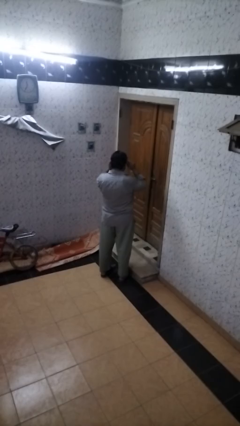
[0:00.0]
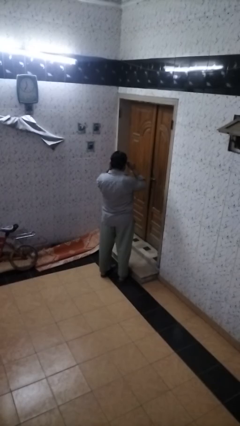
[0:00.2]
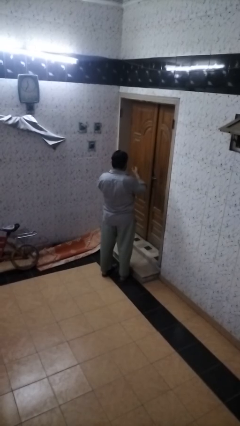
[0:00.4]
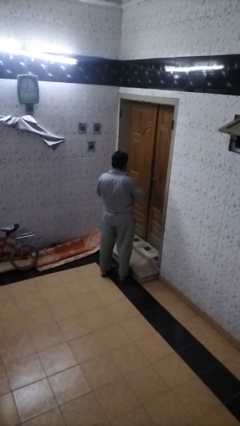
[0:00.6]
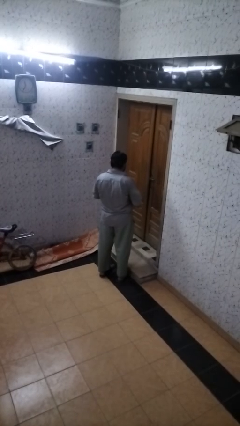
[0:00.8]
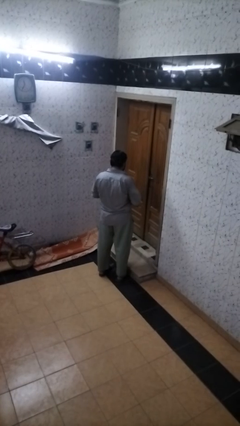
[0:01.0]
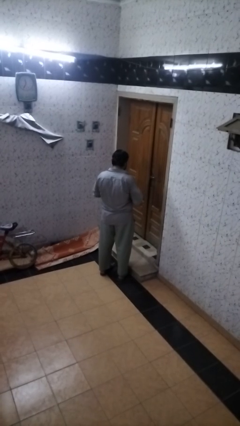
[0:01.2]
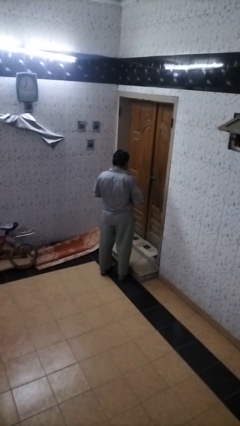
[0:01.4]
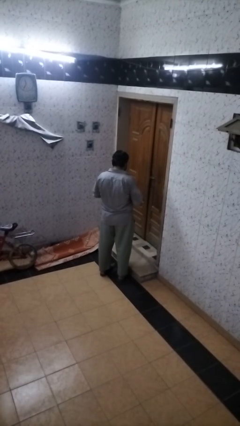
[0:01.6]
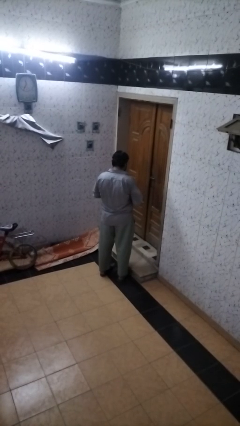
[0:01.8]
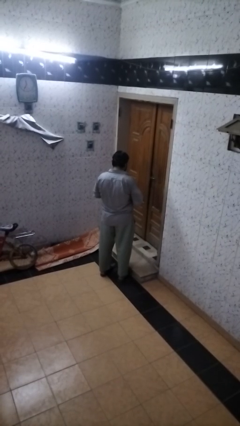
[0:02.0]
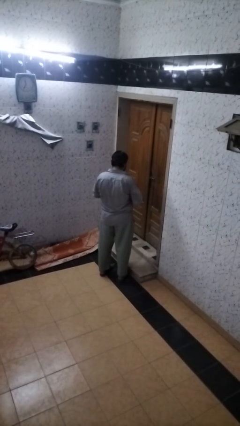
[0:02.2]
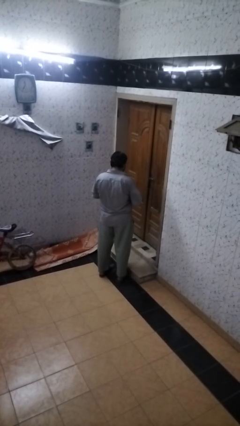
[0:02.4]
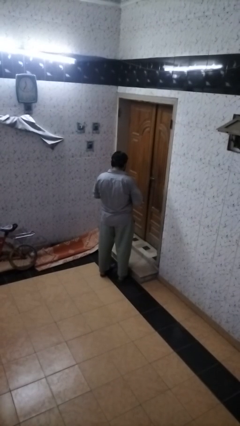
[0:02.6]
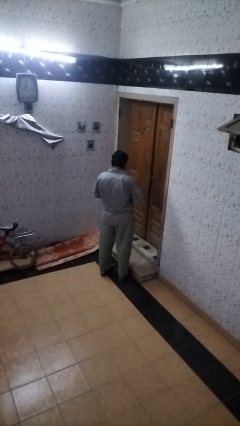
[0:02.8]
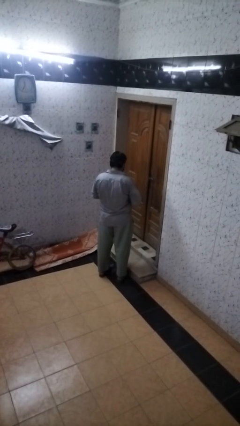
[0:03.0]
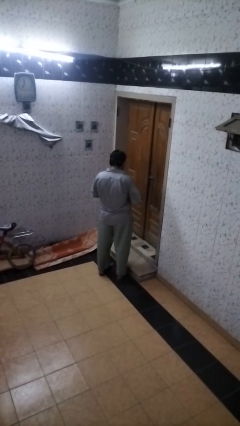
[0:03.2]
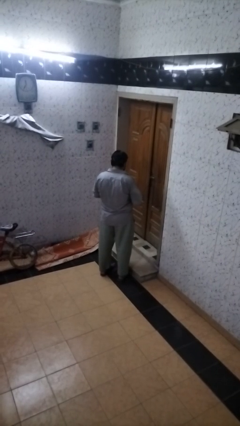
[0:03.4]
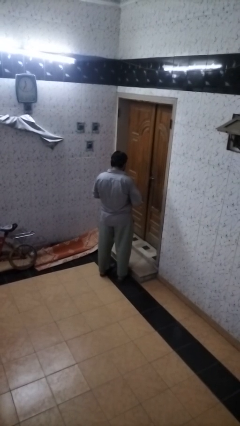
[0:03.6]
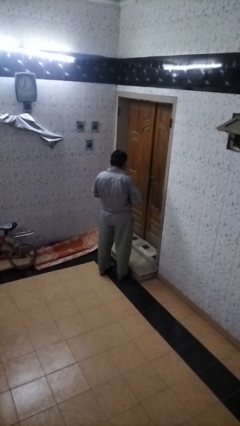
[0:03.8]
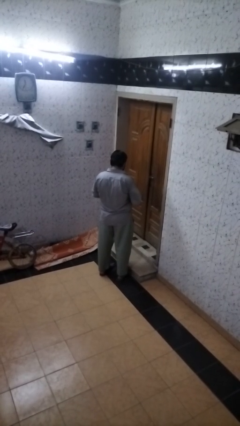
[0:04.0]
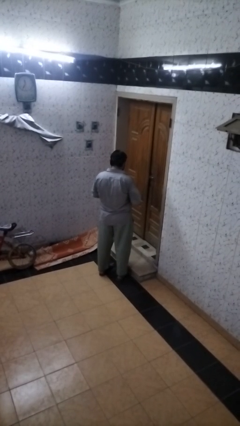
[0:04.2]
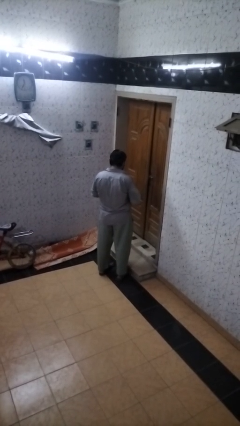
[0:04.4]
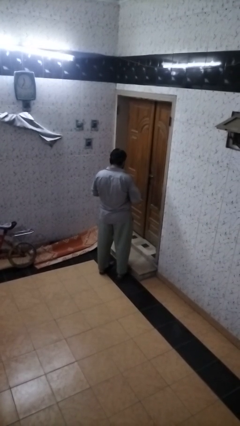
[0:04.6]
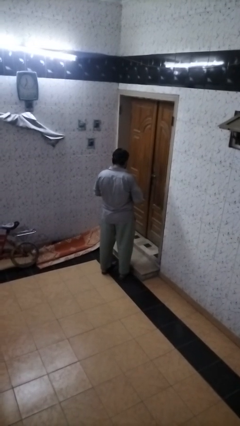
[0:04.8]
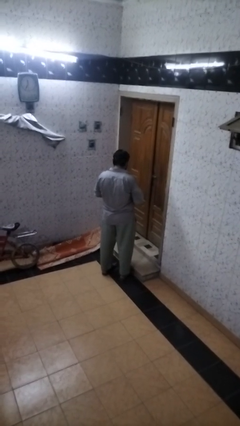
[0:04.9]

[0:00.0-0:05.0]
person takes off sunglasses

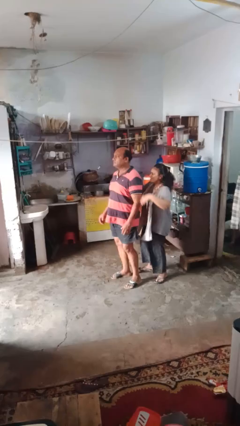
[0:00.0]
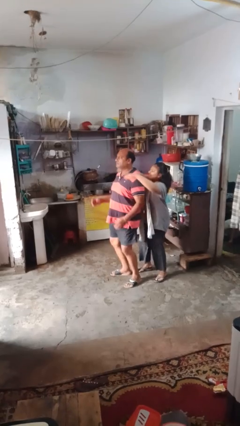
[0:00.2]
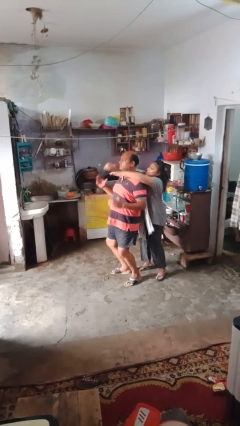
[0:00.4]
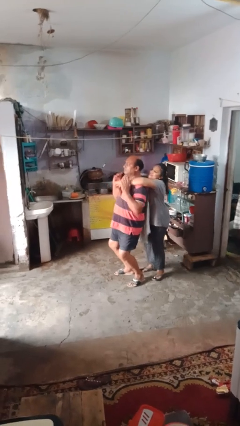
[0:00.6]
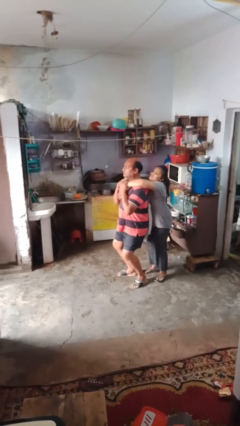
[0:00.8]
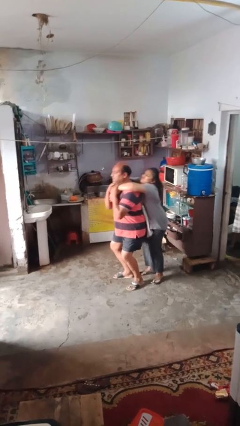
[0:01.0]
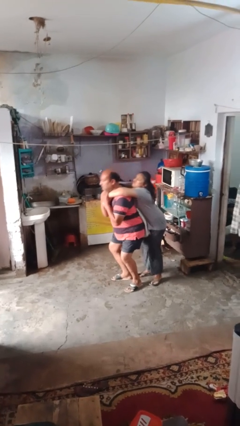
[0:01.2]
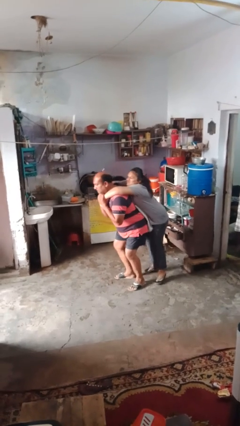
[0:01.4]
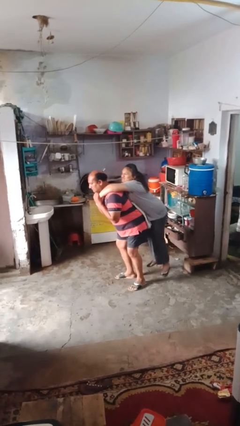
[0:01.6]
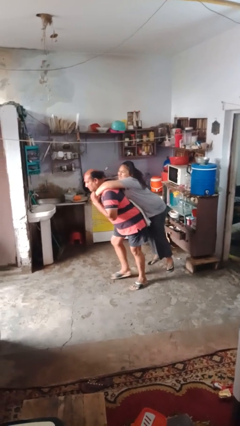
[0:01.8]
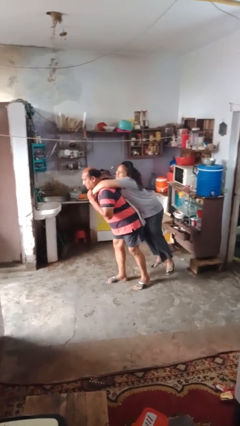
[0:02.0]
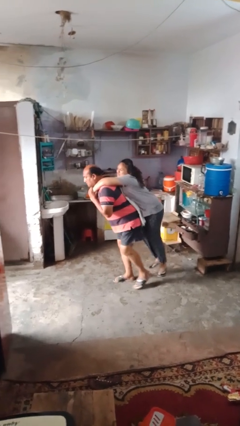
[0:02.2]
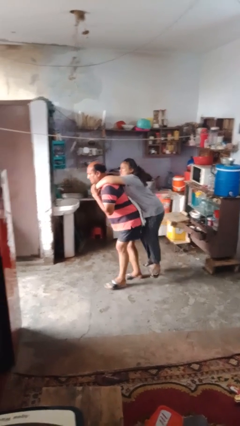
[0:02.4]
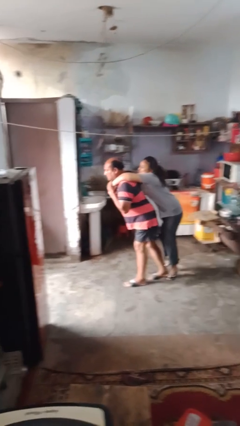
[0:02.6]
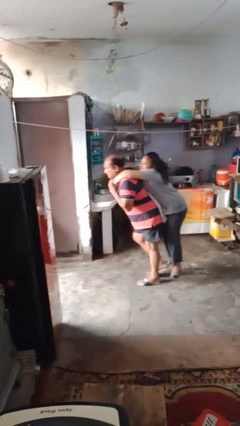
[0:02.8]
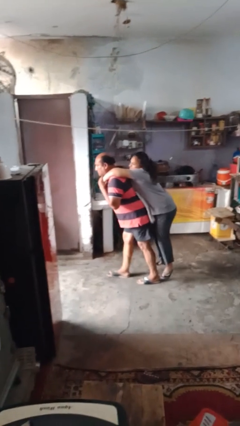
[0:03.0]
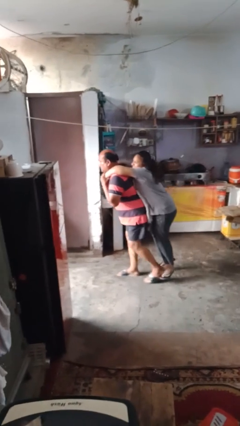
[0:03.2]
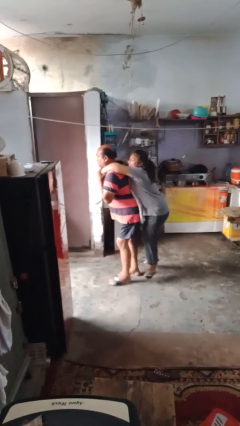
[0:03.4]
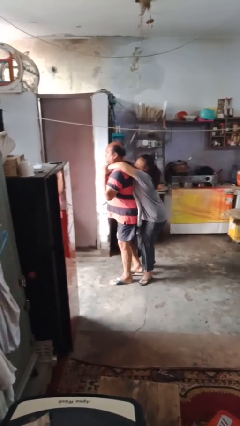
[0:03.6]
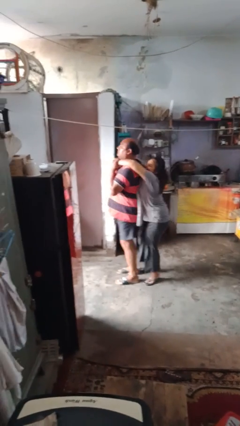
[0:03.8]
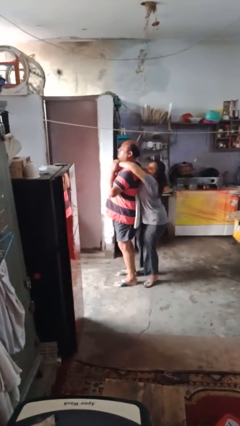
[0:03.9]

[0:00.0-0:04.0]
person carries person on back

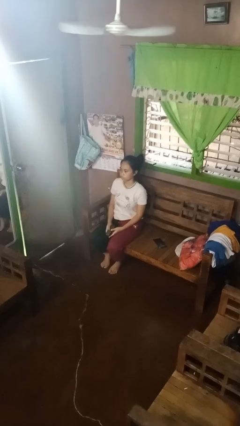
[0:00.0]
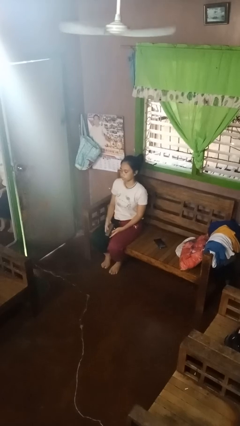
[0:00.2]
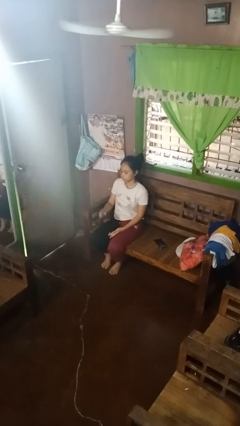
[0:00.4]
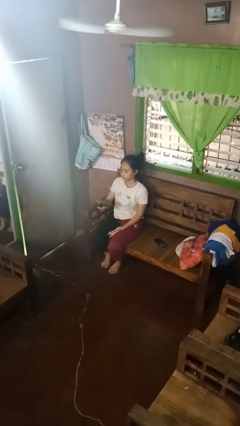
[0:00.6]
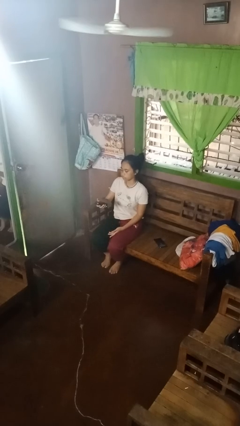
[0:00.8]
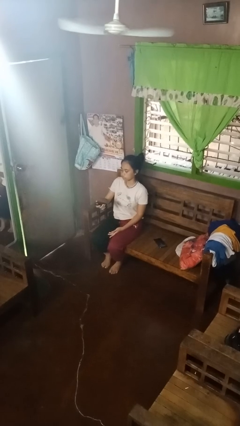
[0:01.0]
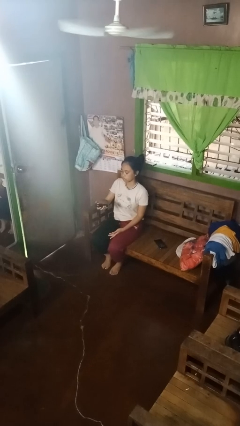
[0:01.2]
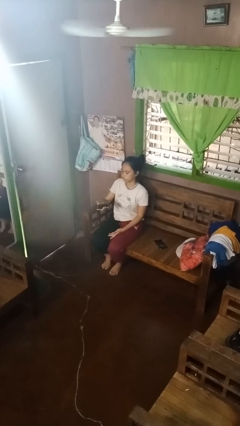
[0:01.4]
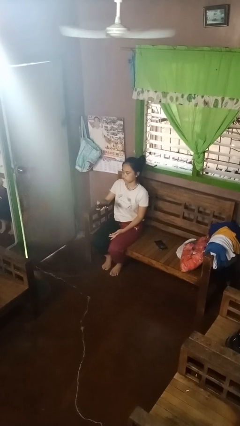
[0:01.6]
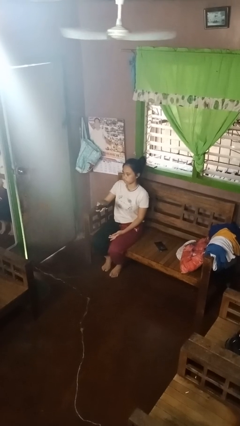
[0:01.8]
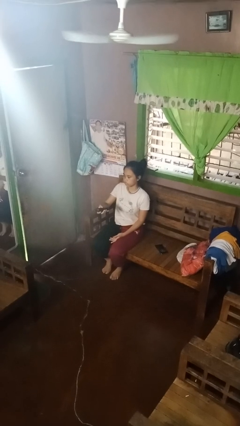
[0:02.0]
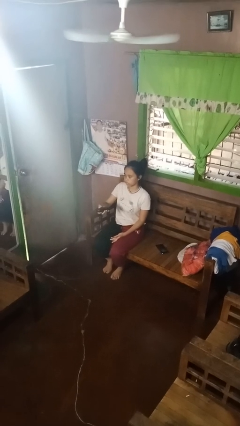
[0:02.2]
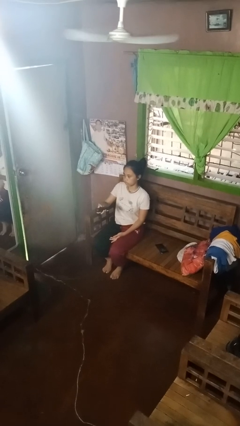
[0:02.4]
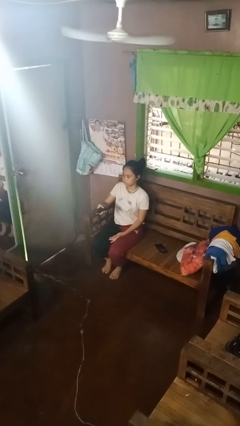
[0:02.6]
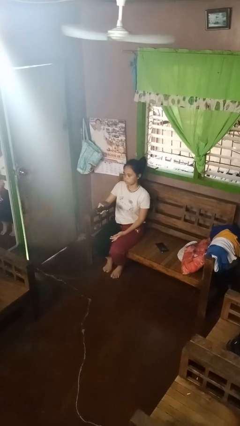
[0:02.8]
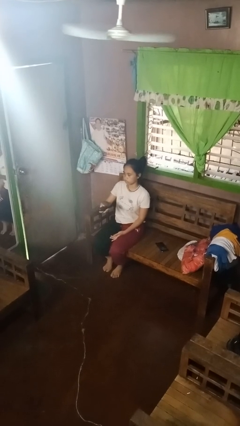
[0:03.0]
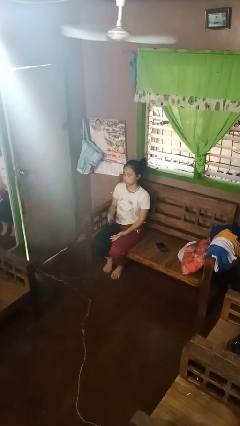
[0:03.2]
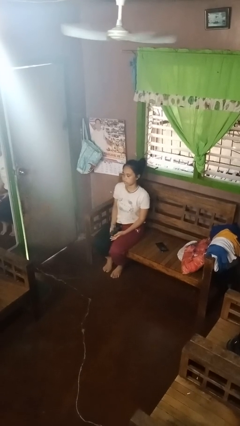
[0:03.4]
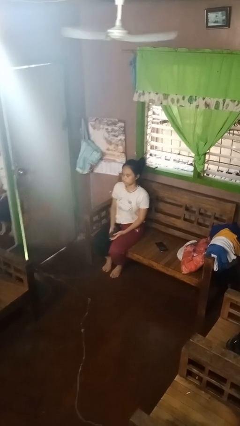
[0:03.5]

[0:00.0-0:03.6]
person uses television remote

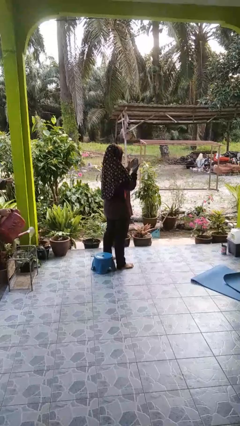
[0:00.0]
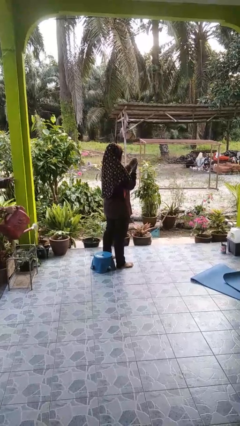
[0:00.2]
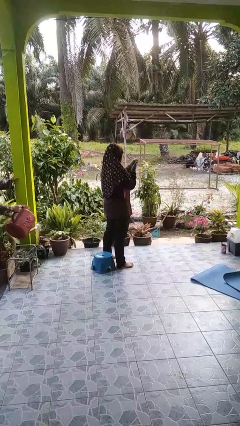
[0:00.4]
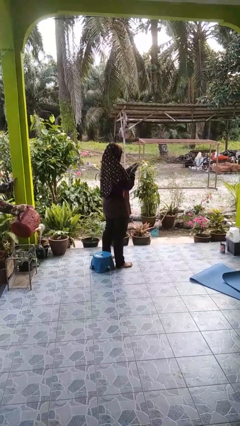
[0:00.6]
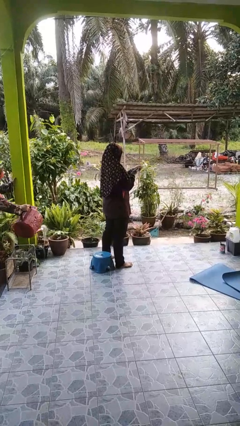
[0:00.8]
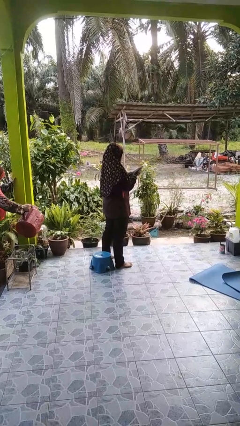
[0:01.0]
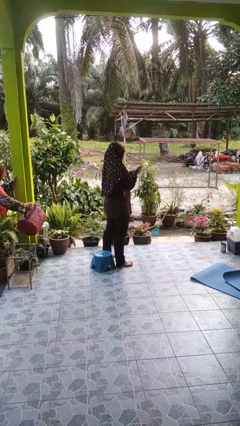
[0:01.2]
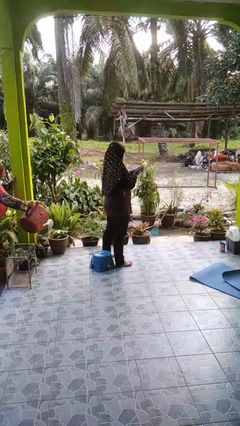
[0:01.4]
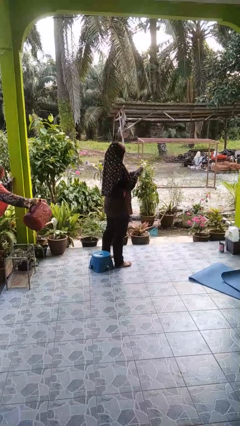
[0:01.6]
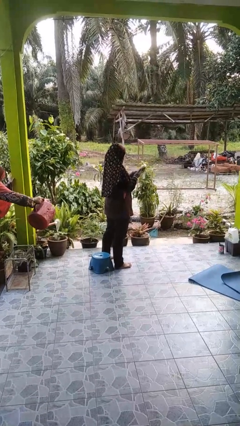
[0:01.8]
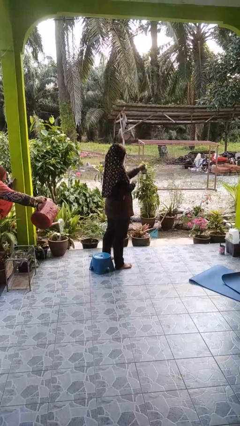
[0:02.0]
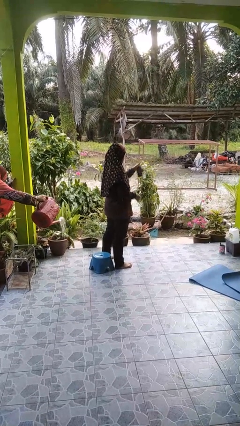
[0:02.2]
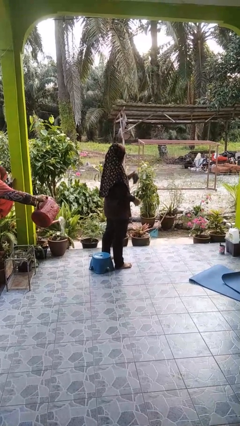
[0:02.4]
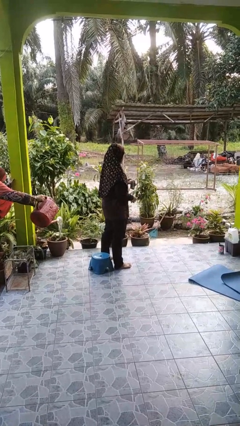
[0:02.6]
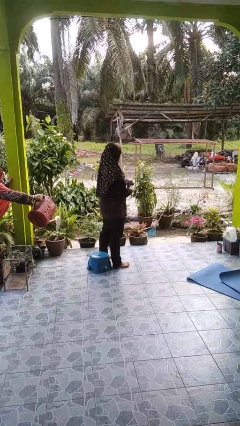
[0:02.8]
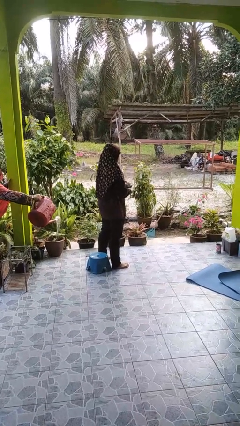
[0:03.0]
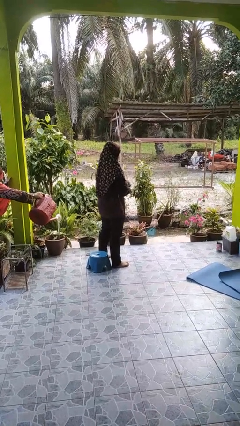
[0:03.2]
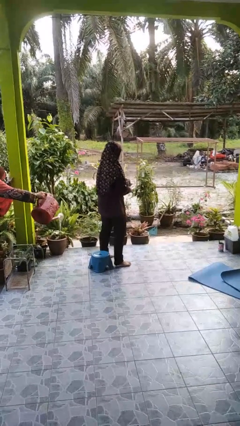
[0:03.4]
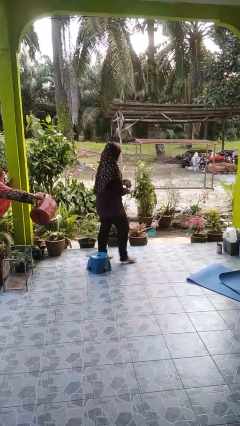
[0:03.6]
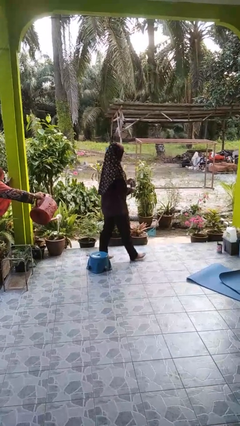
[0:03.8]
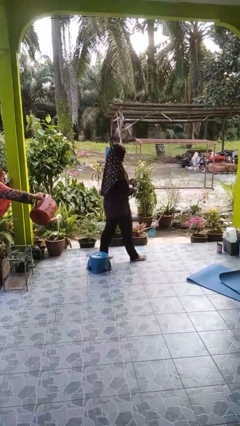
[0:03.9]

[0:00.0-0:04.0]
person takes off gloves

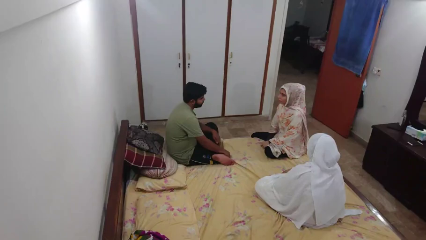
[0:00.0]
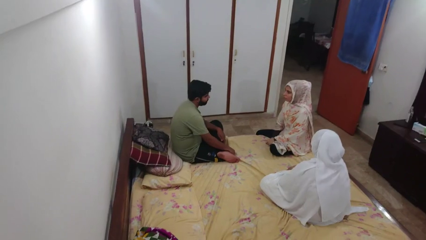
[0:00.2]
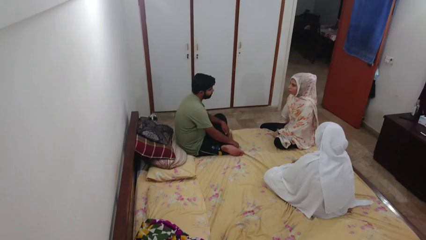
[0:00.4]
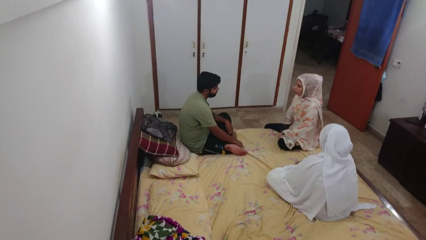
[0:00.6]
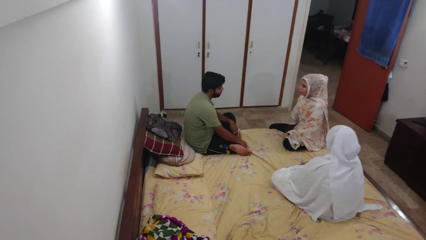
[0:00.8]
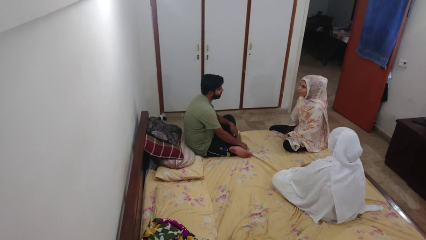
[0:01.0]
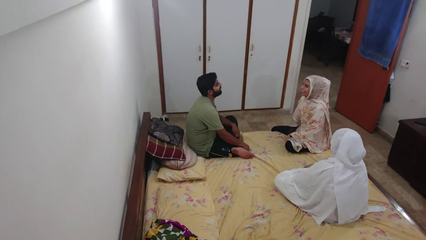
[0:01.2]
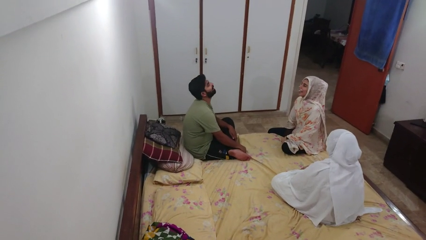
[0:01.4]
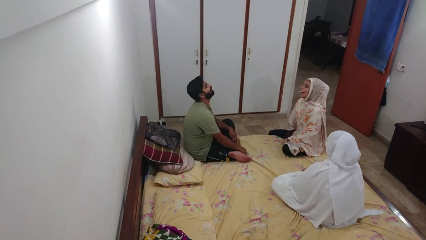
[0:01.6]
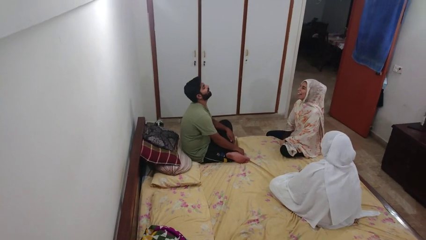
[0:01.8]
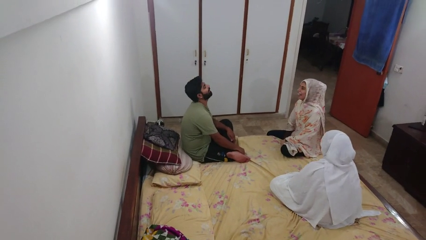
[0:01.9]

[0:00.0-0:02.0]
person laughs with person
